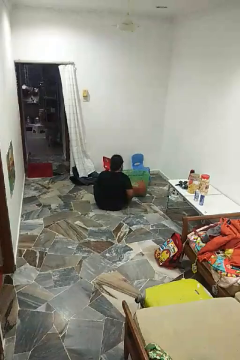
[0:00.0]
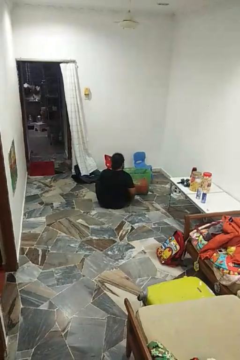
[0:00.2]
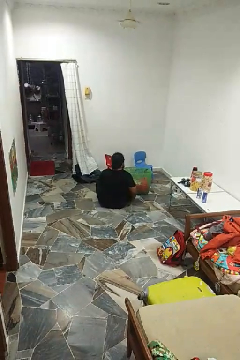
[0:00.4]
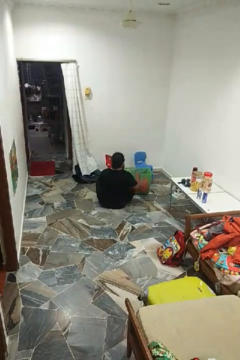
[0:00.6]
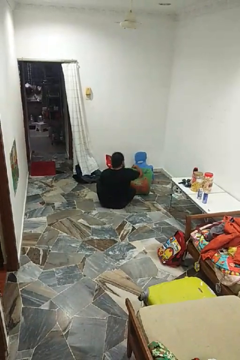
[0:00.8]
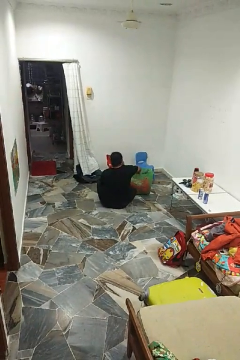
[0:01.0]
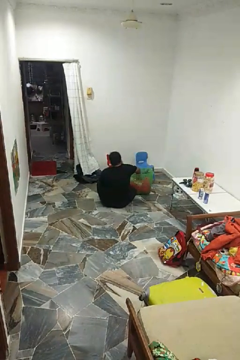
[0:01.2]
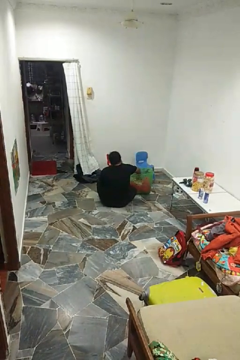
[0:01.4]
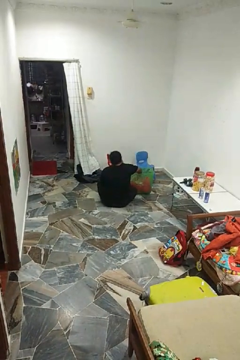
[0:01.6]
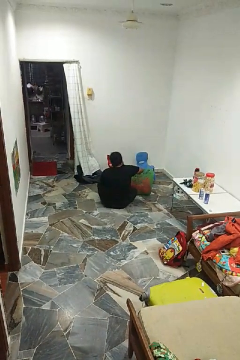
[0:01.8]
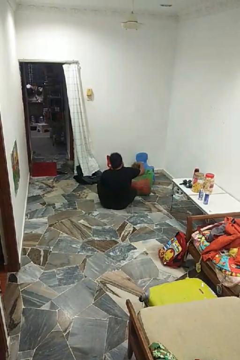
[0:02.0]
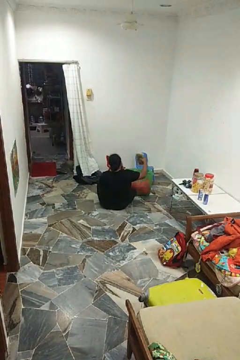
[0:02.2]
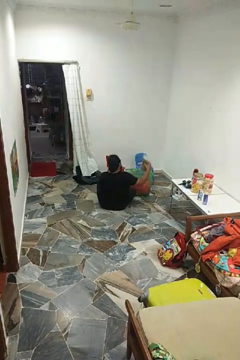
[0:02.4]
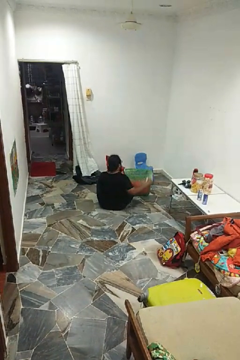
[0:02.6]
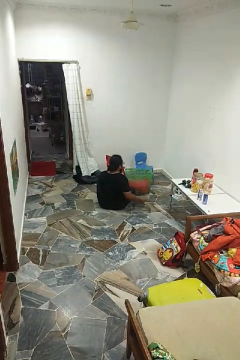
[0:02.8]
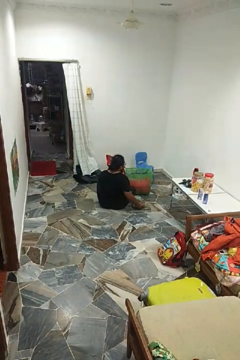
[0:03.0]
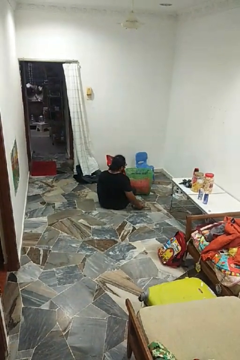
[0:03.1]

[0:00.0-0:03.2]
person takes object from basket

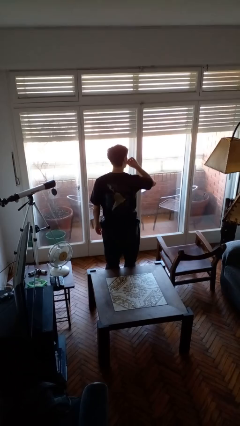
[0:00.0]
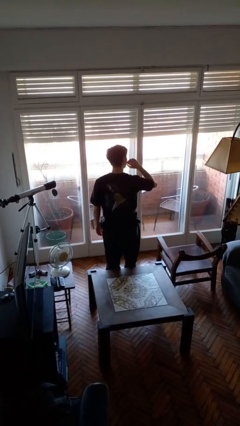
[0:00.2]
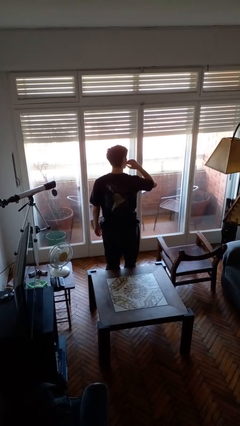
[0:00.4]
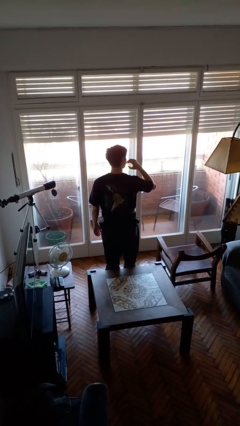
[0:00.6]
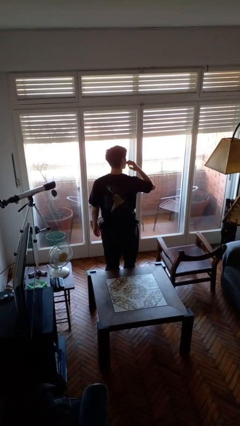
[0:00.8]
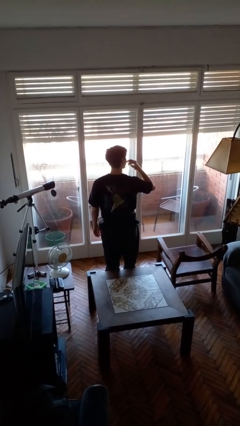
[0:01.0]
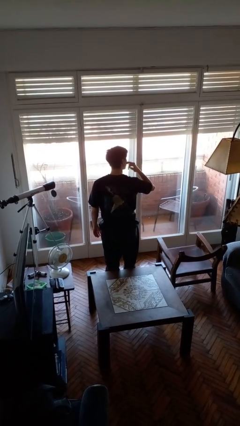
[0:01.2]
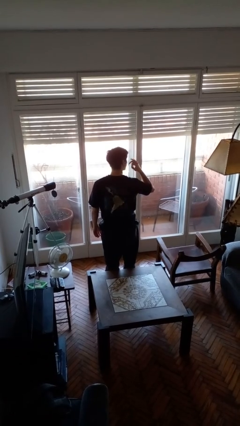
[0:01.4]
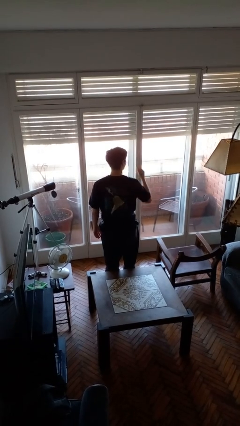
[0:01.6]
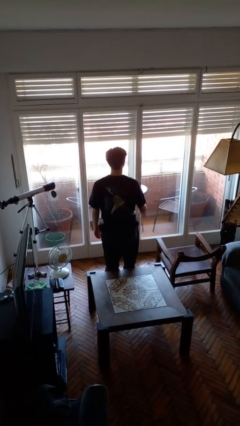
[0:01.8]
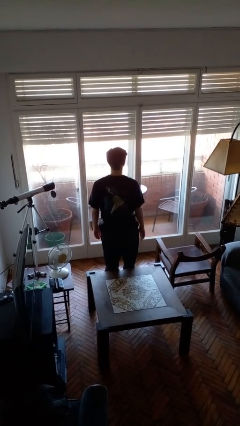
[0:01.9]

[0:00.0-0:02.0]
person licks fingers

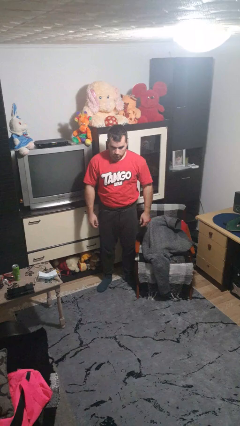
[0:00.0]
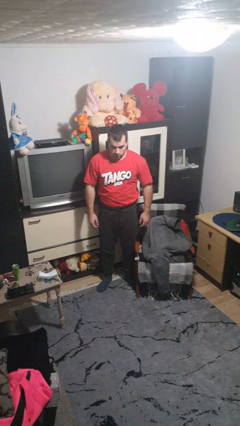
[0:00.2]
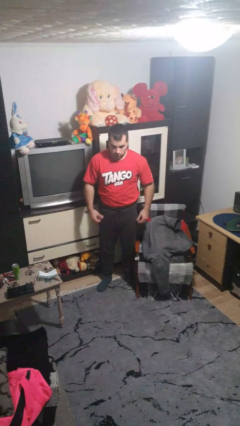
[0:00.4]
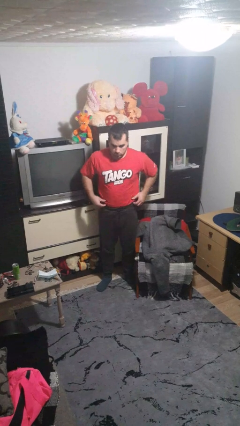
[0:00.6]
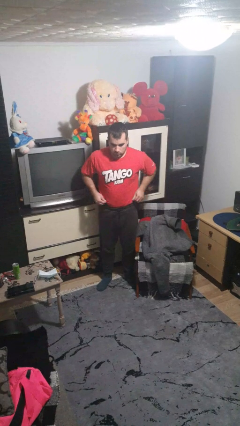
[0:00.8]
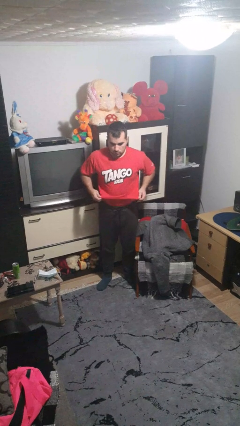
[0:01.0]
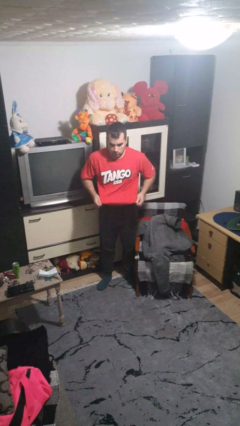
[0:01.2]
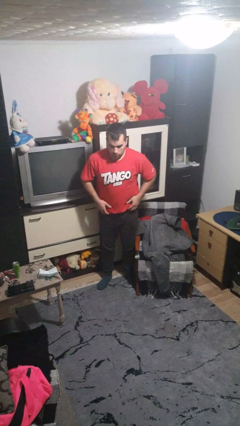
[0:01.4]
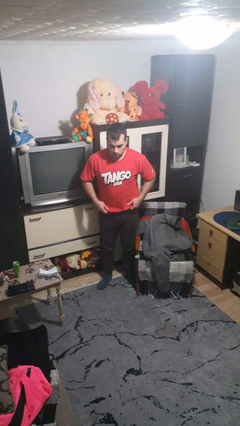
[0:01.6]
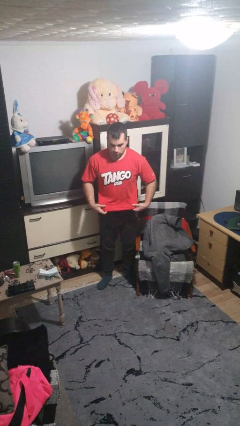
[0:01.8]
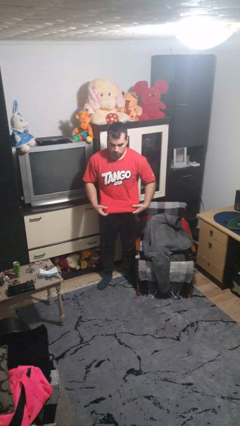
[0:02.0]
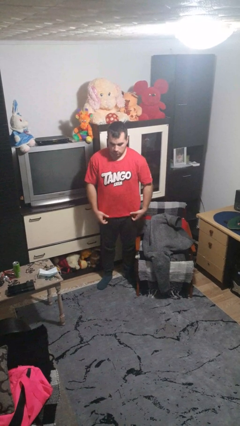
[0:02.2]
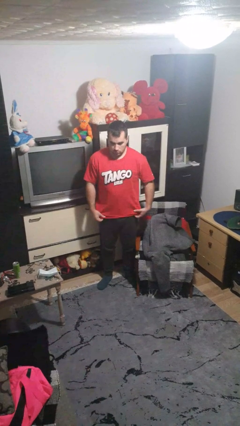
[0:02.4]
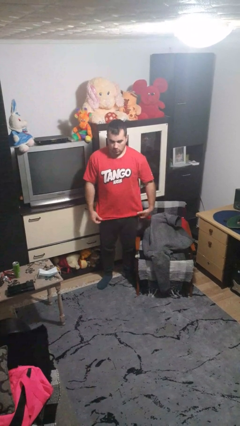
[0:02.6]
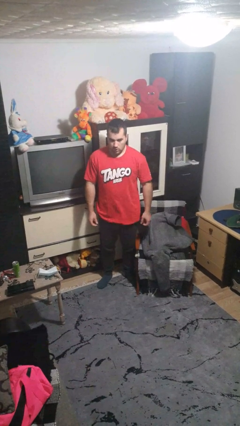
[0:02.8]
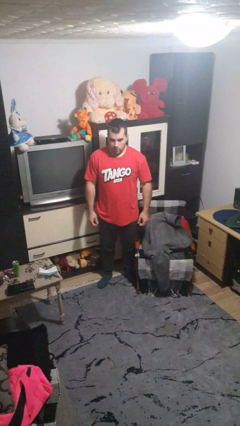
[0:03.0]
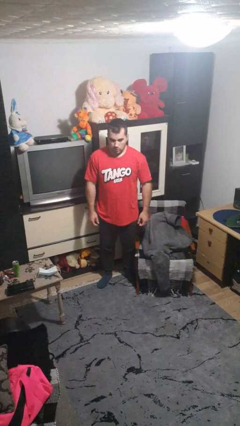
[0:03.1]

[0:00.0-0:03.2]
person untucks shirt

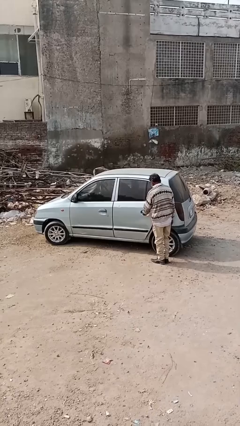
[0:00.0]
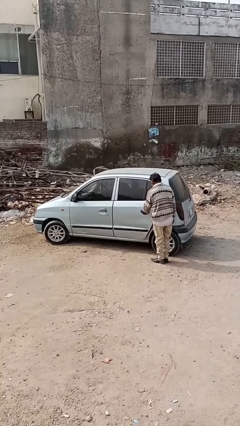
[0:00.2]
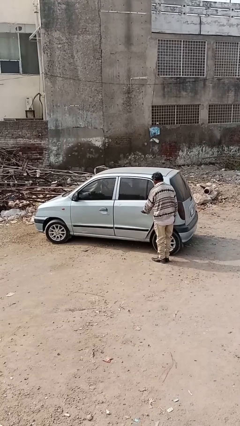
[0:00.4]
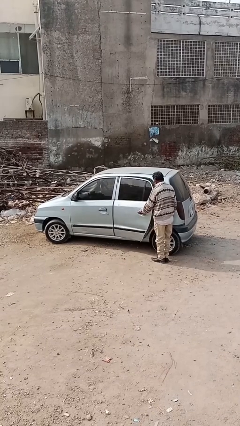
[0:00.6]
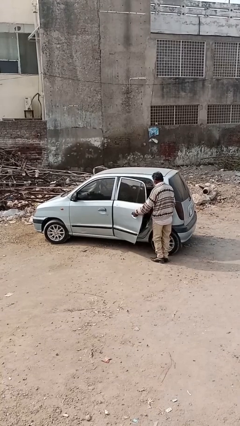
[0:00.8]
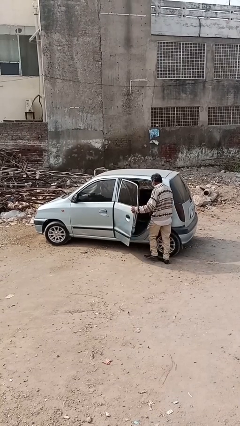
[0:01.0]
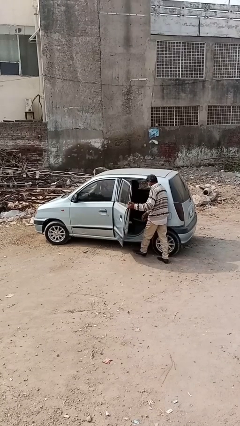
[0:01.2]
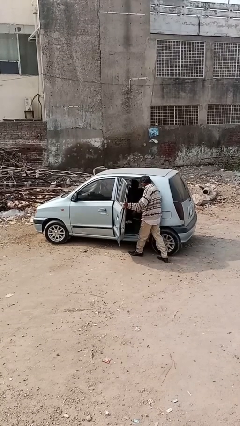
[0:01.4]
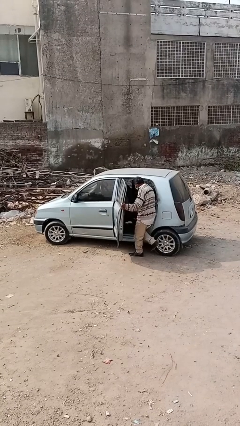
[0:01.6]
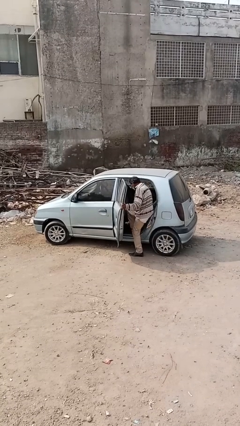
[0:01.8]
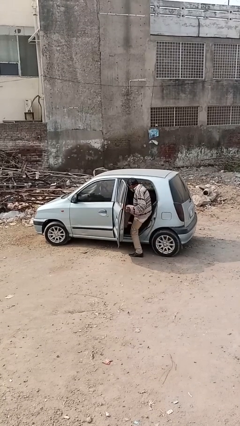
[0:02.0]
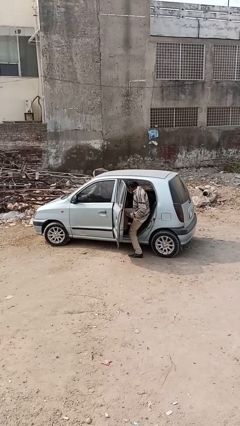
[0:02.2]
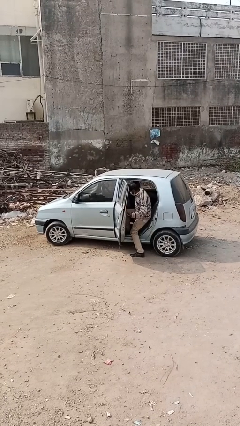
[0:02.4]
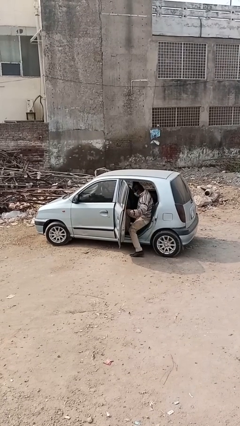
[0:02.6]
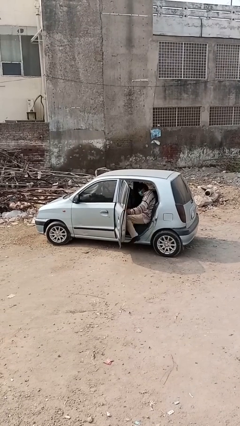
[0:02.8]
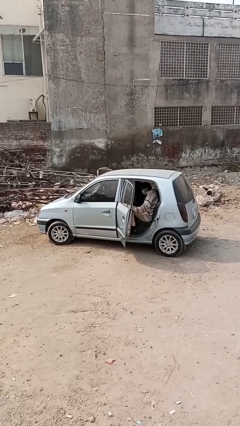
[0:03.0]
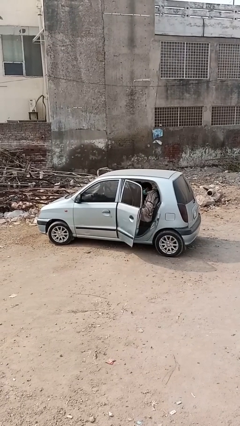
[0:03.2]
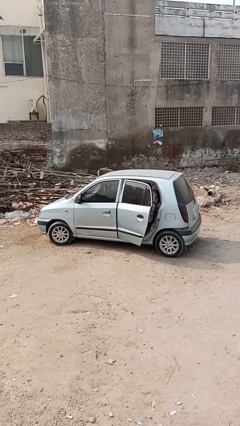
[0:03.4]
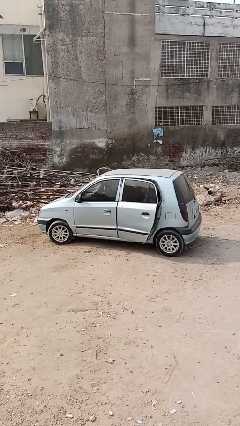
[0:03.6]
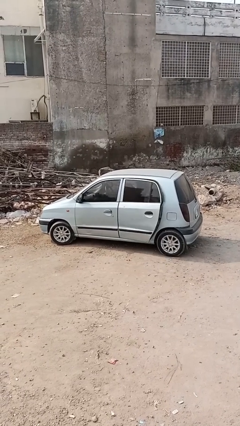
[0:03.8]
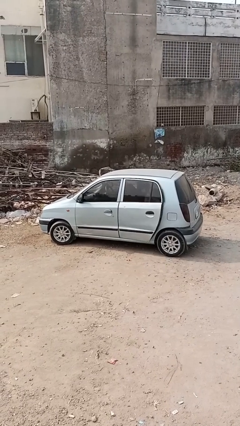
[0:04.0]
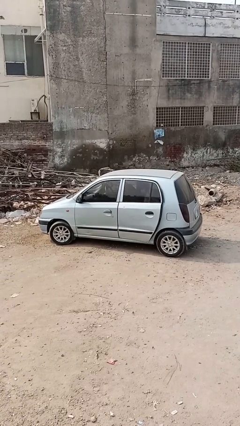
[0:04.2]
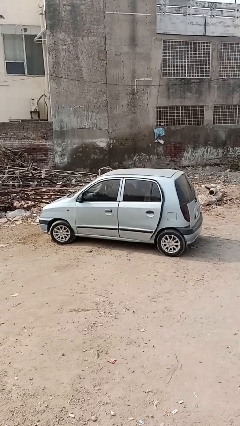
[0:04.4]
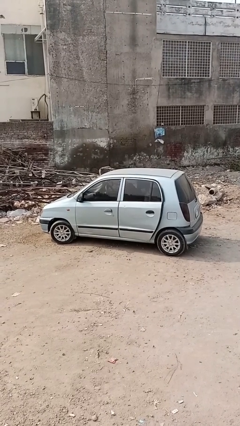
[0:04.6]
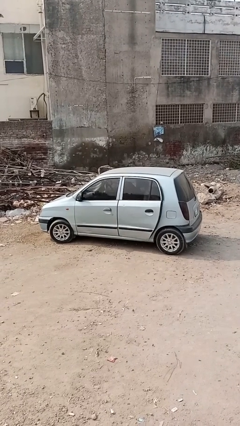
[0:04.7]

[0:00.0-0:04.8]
car picks up person

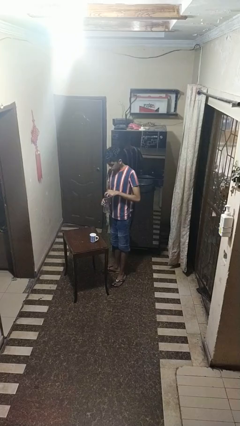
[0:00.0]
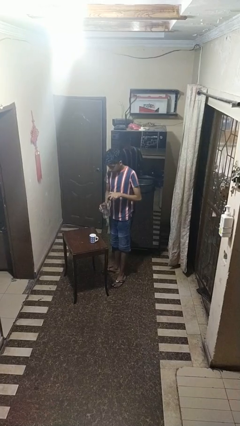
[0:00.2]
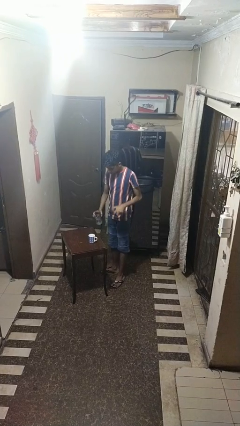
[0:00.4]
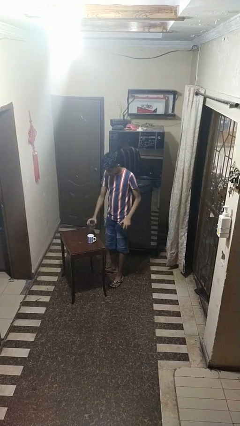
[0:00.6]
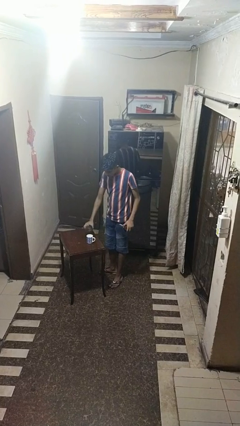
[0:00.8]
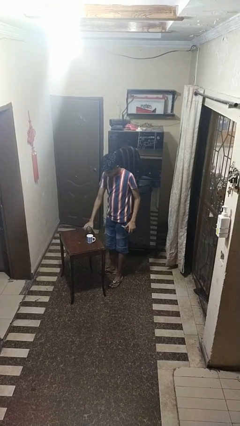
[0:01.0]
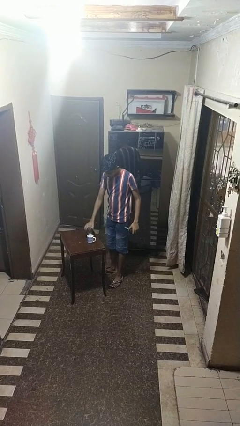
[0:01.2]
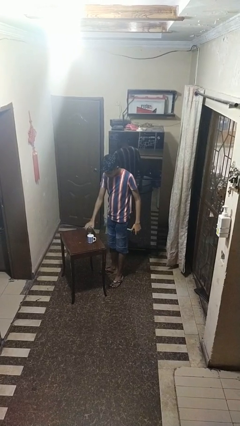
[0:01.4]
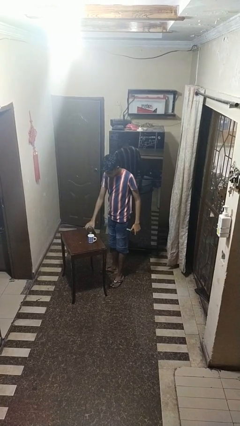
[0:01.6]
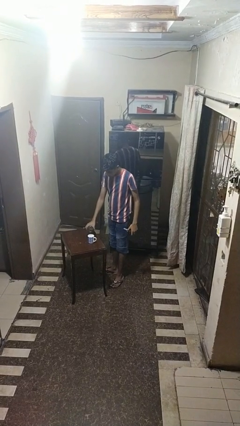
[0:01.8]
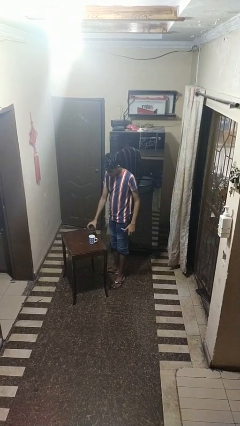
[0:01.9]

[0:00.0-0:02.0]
person pours liquid into cup

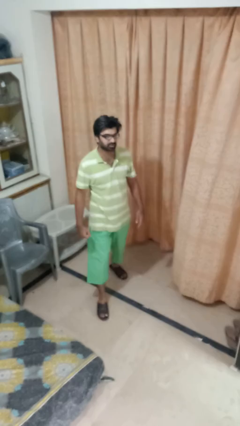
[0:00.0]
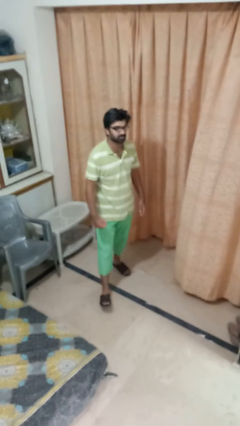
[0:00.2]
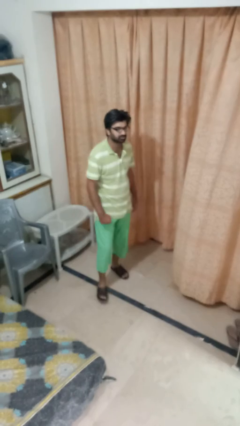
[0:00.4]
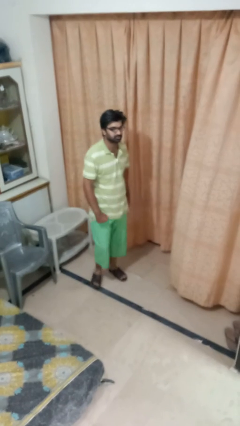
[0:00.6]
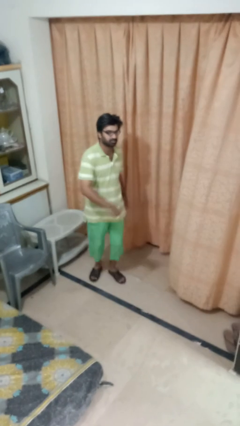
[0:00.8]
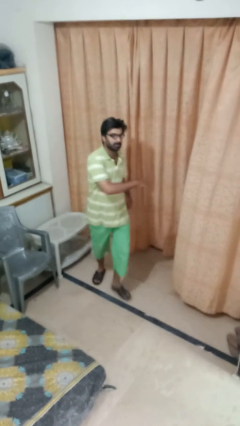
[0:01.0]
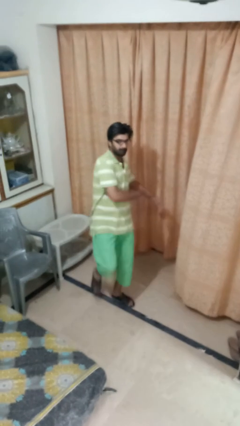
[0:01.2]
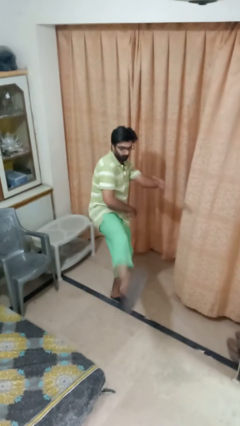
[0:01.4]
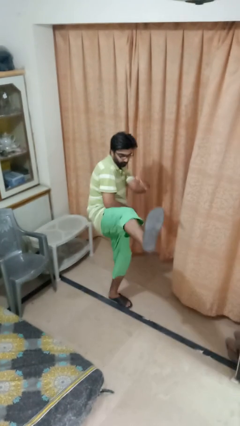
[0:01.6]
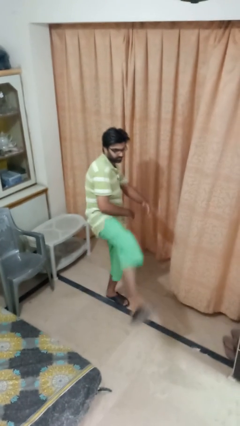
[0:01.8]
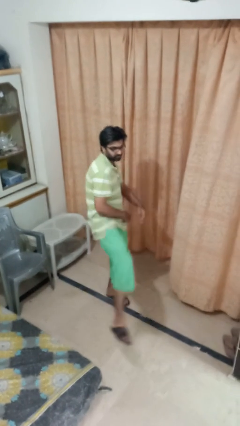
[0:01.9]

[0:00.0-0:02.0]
person karate kicks

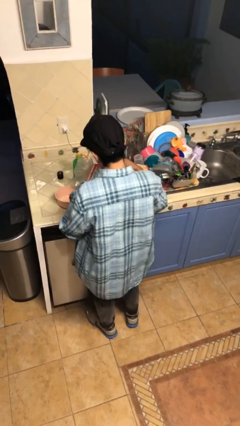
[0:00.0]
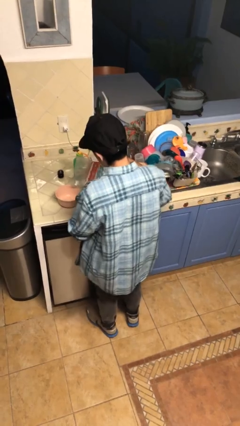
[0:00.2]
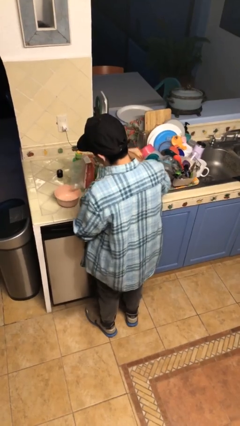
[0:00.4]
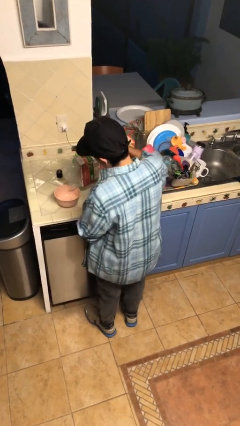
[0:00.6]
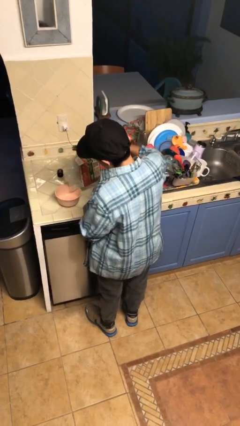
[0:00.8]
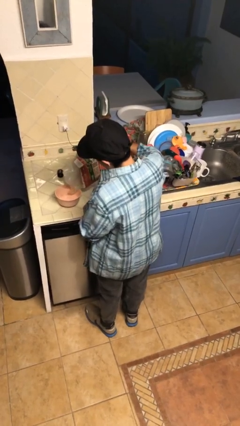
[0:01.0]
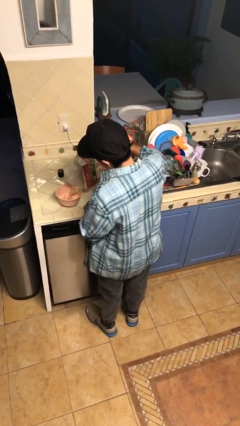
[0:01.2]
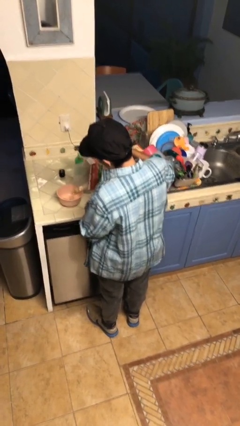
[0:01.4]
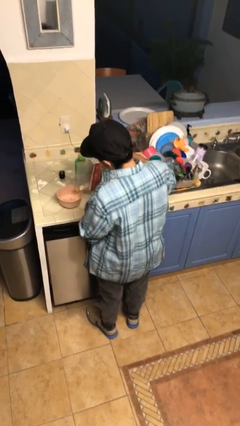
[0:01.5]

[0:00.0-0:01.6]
person pours into bowl
